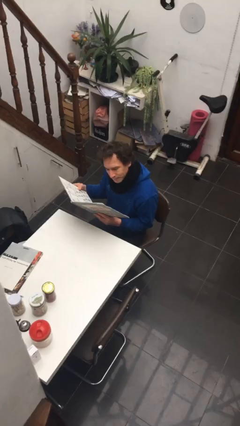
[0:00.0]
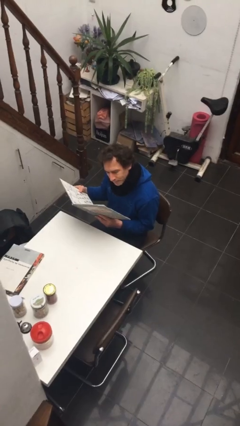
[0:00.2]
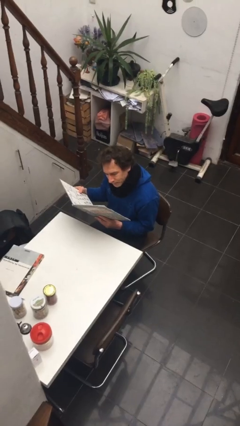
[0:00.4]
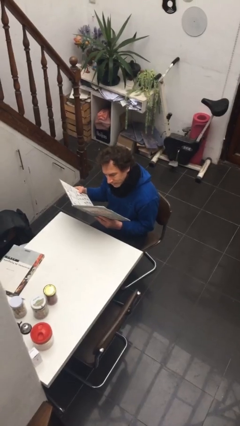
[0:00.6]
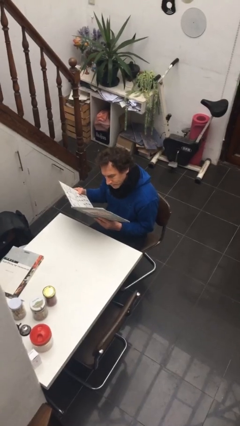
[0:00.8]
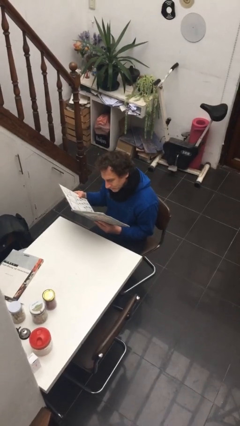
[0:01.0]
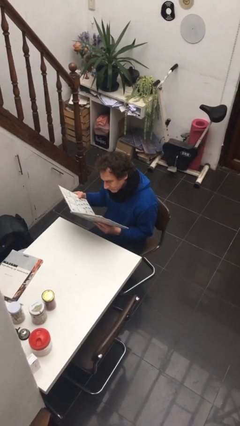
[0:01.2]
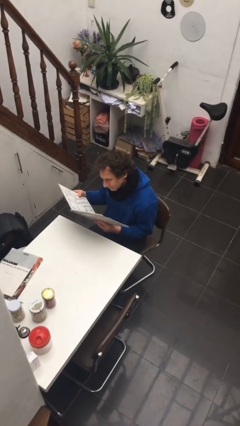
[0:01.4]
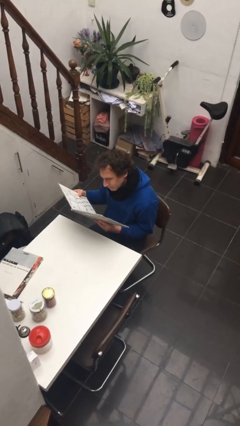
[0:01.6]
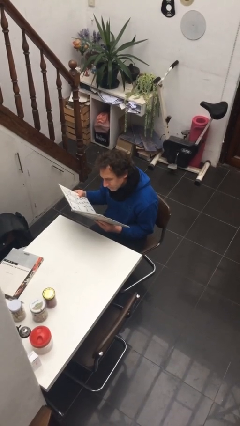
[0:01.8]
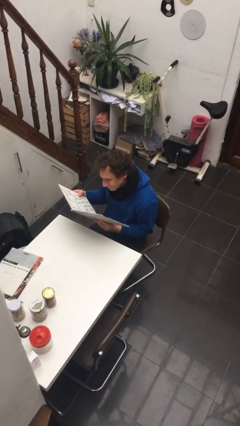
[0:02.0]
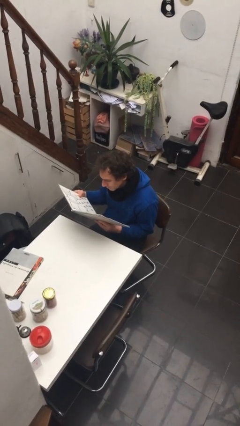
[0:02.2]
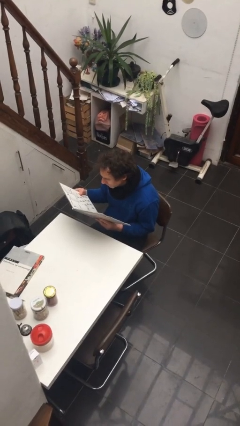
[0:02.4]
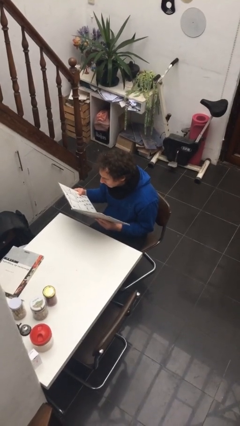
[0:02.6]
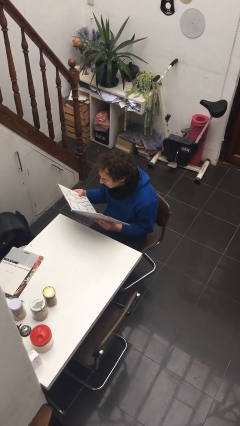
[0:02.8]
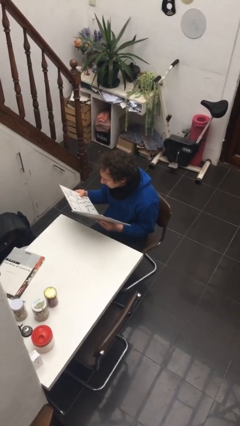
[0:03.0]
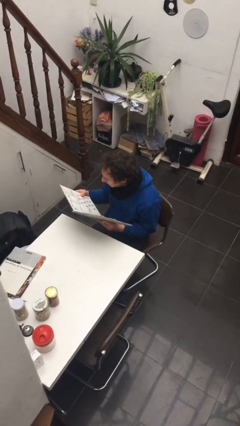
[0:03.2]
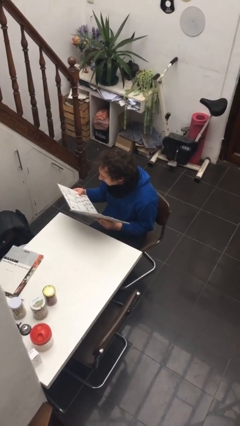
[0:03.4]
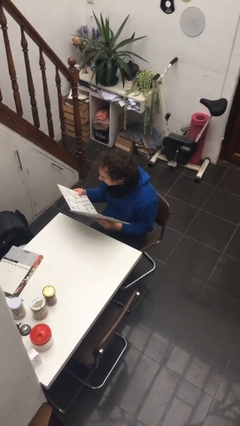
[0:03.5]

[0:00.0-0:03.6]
person reads document

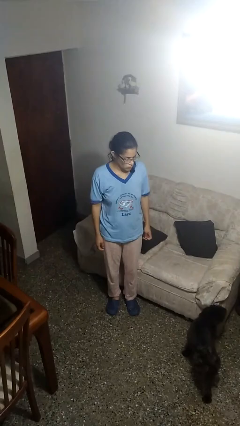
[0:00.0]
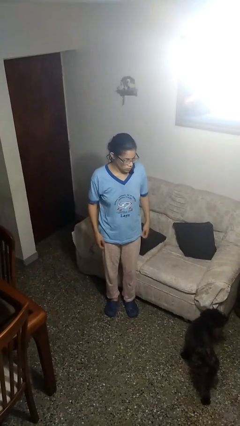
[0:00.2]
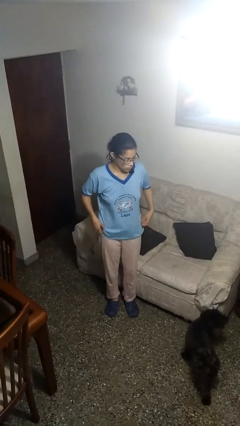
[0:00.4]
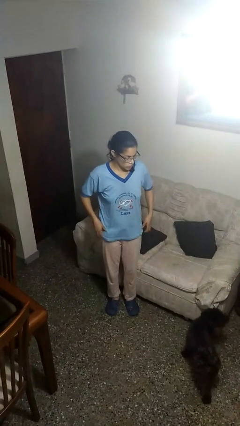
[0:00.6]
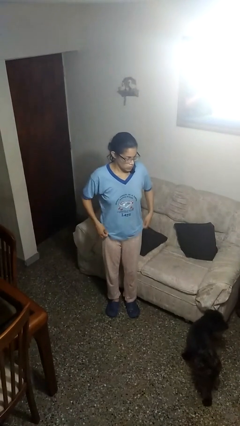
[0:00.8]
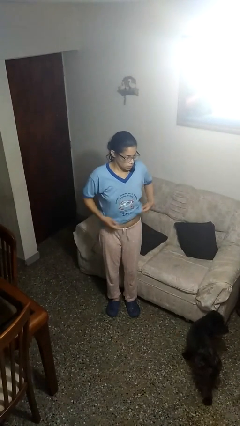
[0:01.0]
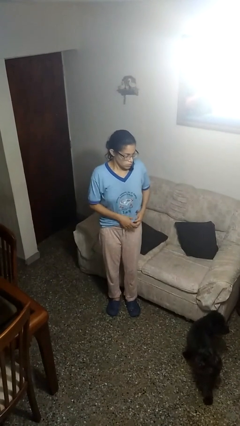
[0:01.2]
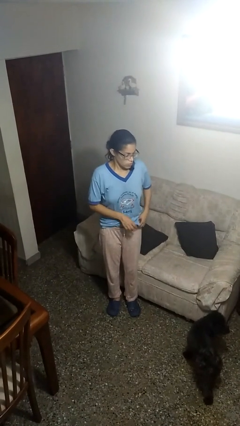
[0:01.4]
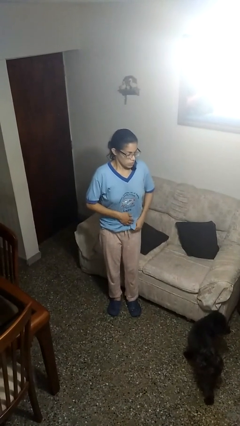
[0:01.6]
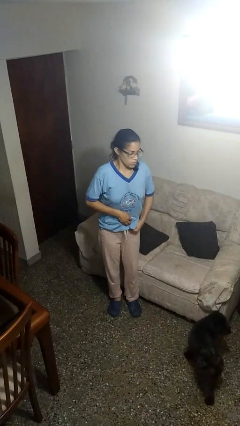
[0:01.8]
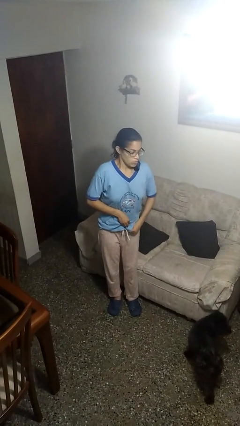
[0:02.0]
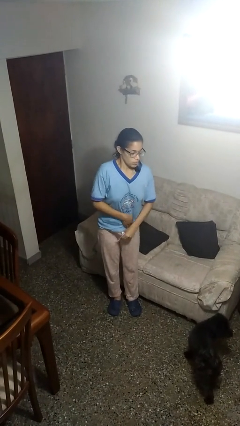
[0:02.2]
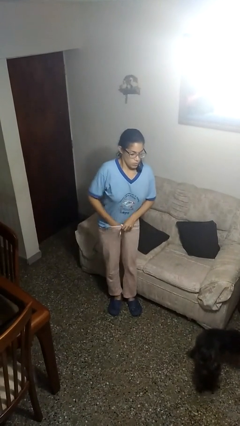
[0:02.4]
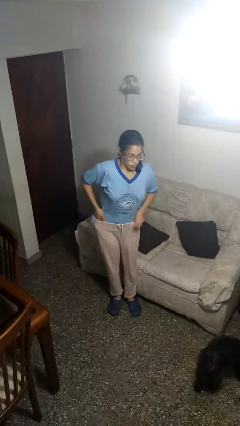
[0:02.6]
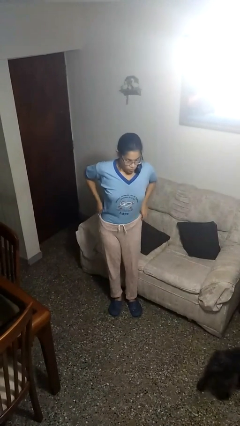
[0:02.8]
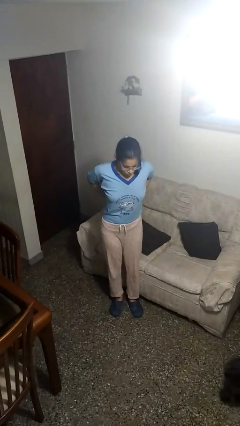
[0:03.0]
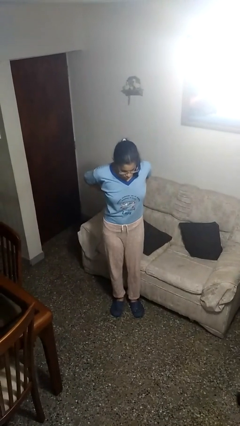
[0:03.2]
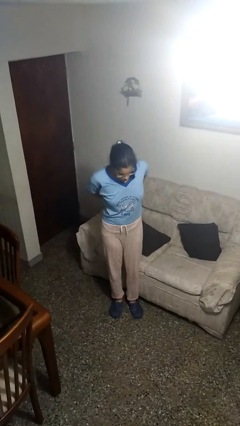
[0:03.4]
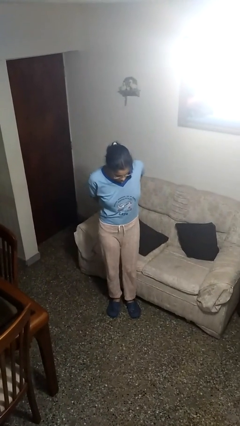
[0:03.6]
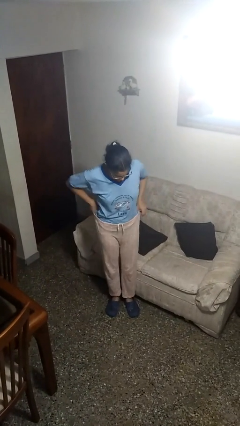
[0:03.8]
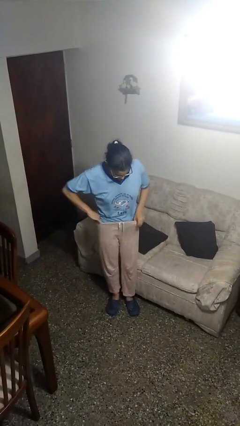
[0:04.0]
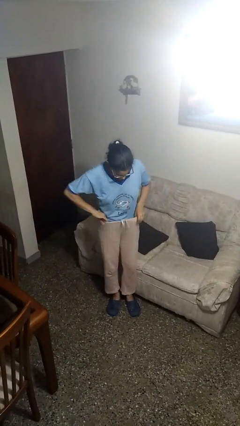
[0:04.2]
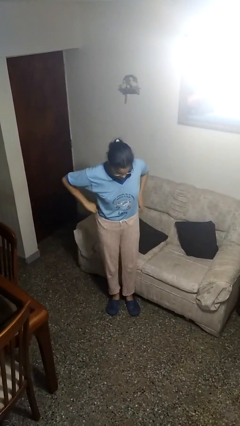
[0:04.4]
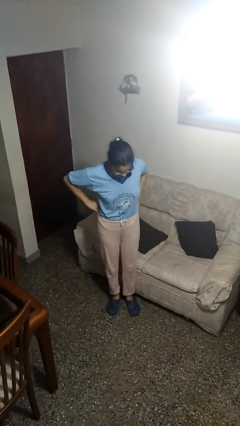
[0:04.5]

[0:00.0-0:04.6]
person tucks in shirt

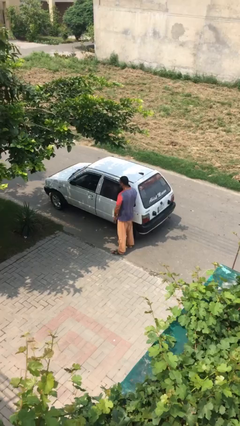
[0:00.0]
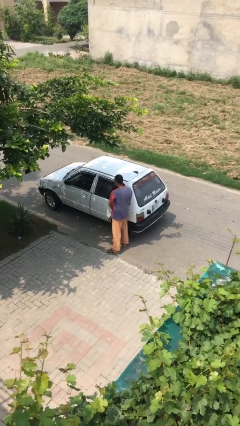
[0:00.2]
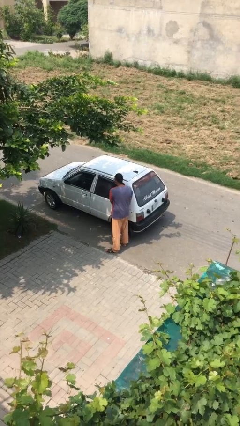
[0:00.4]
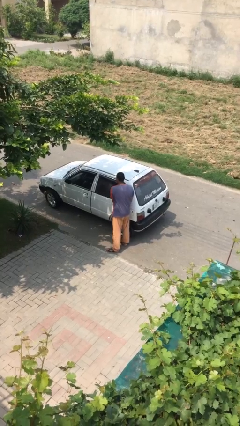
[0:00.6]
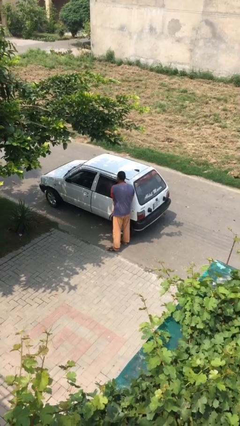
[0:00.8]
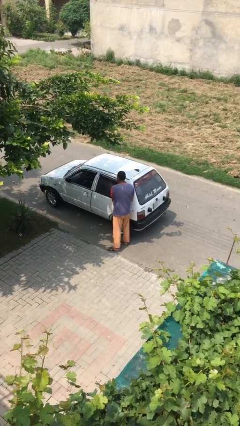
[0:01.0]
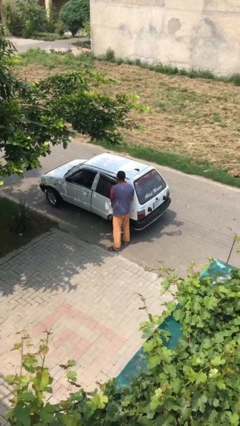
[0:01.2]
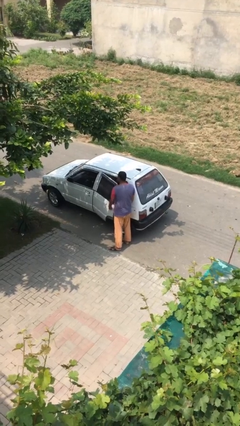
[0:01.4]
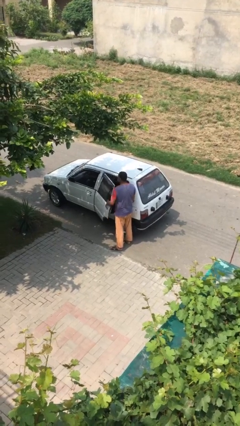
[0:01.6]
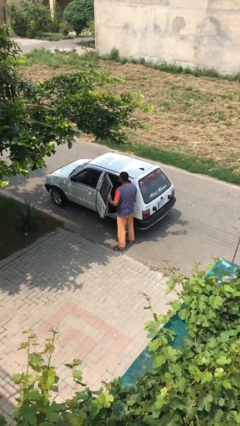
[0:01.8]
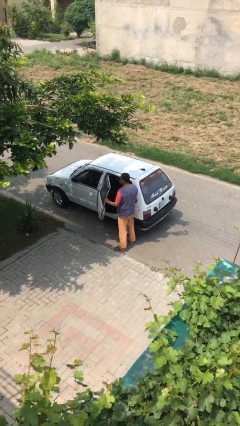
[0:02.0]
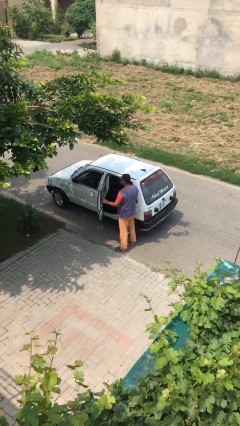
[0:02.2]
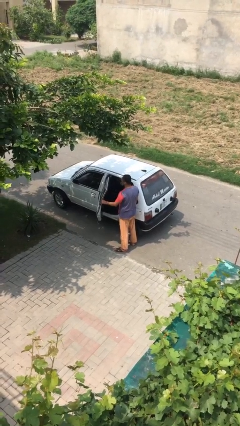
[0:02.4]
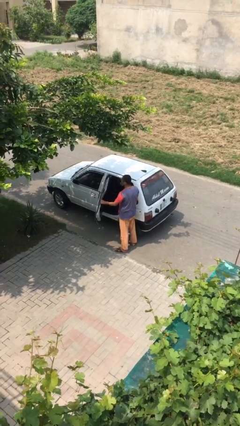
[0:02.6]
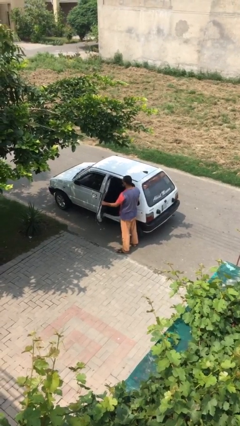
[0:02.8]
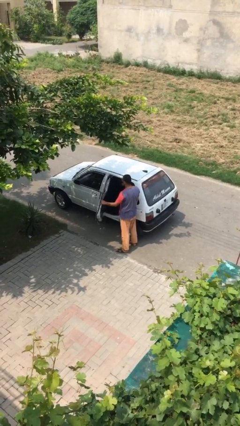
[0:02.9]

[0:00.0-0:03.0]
person opens car door

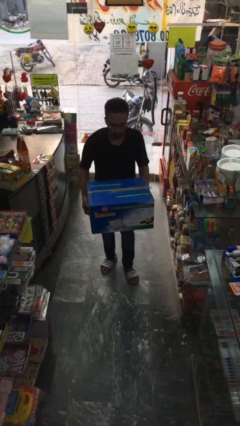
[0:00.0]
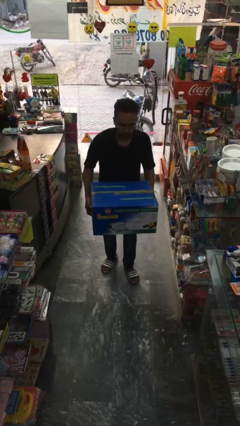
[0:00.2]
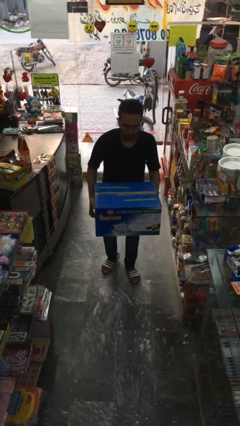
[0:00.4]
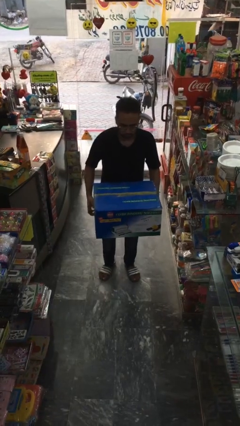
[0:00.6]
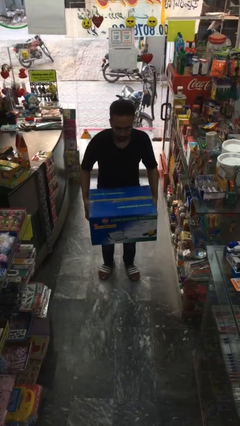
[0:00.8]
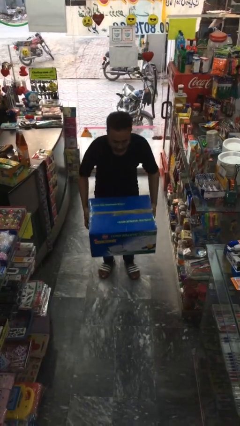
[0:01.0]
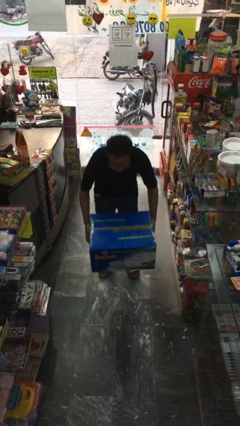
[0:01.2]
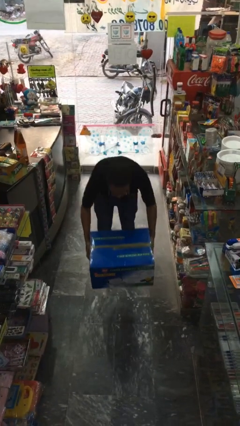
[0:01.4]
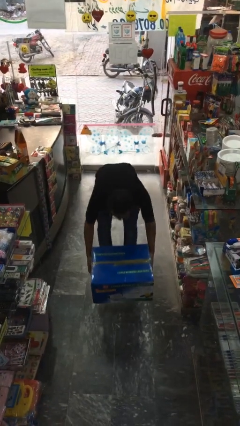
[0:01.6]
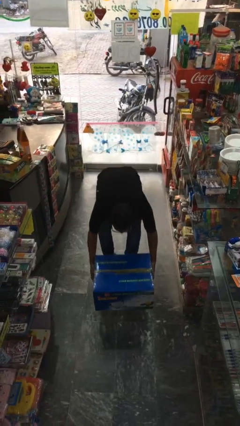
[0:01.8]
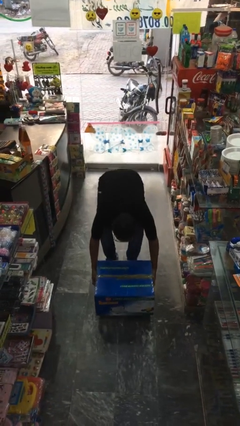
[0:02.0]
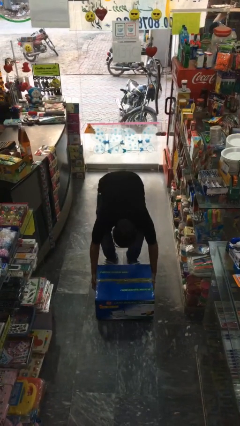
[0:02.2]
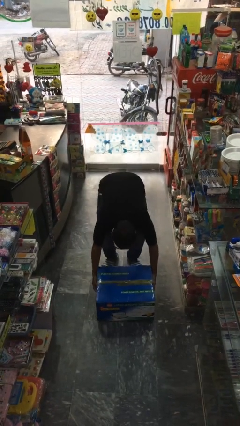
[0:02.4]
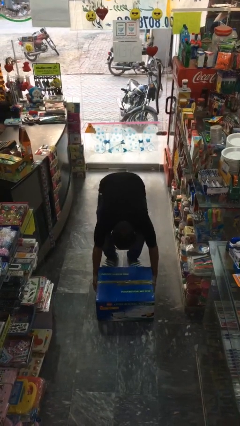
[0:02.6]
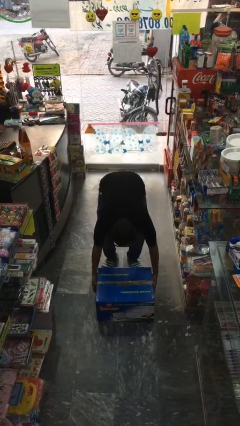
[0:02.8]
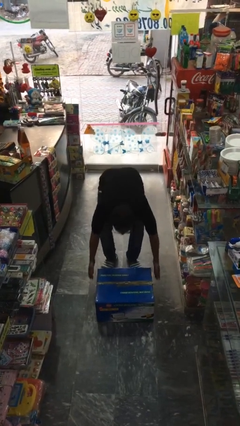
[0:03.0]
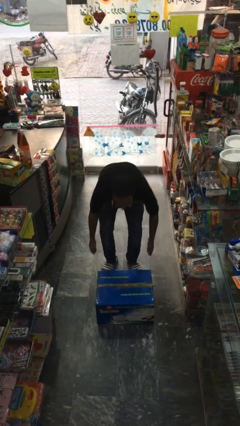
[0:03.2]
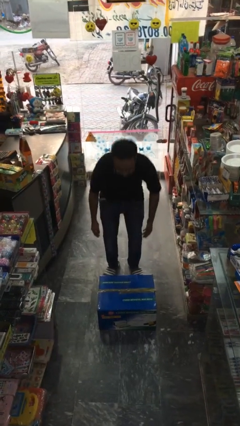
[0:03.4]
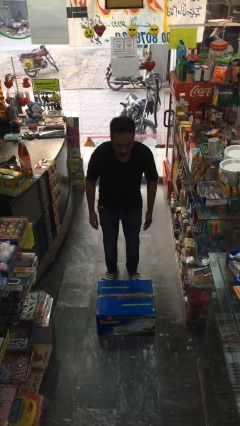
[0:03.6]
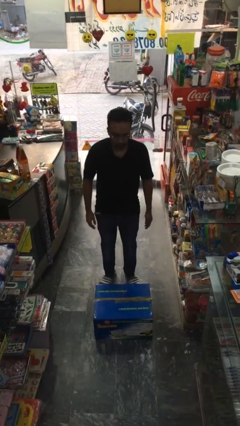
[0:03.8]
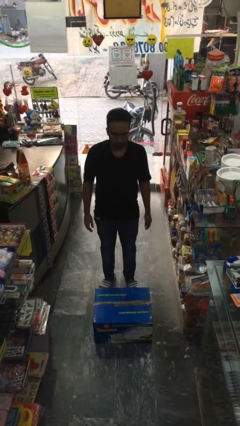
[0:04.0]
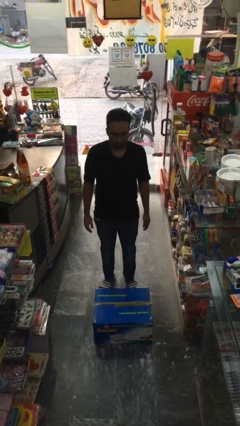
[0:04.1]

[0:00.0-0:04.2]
person puts down object on floor

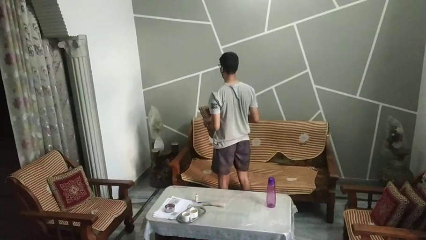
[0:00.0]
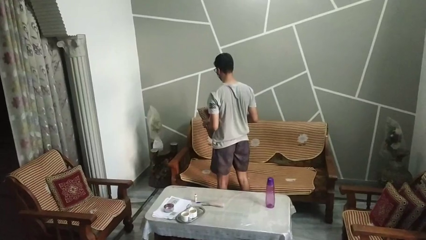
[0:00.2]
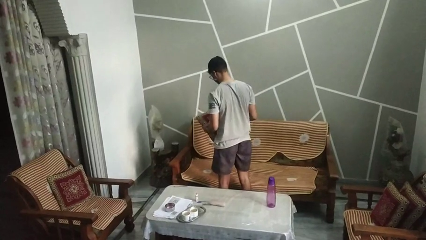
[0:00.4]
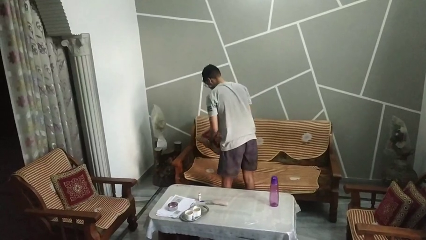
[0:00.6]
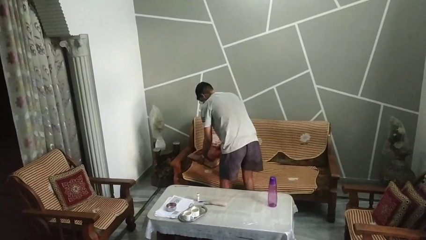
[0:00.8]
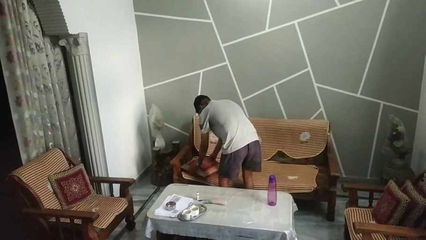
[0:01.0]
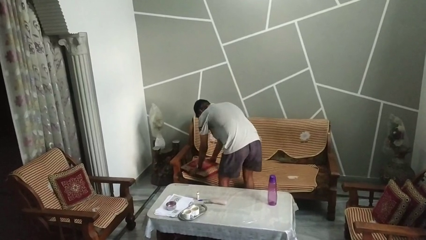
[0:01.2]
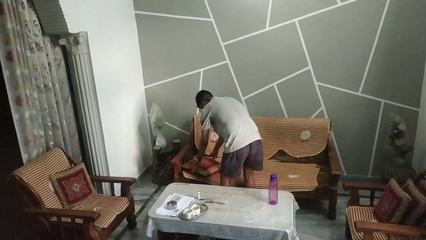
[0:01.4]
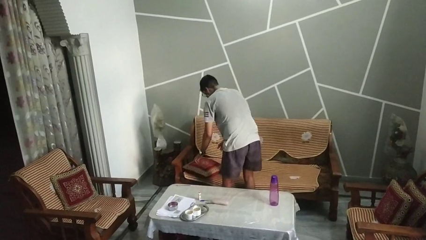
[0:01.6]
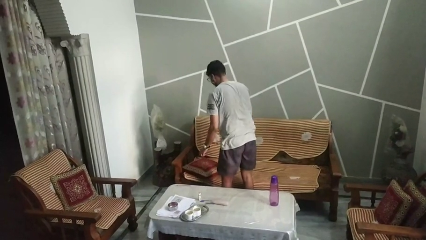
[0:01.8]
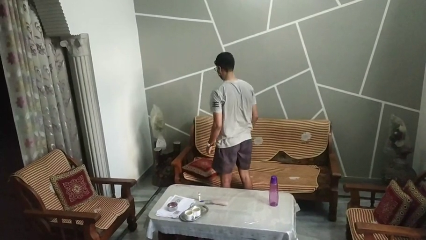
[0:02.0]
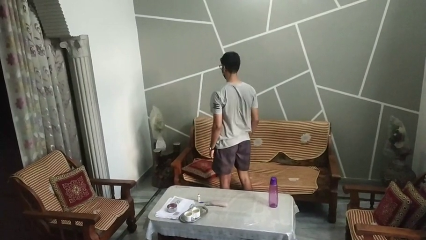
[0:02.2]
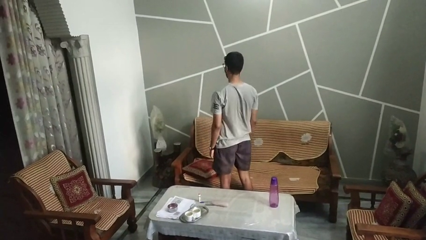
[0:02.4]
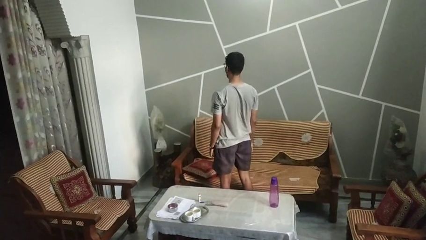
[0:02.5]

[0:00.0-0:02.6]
person puts down object on couch
